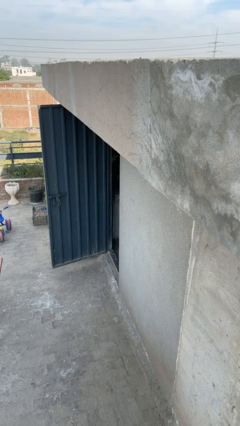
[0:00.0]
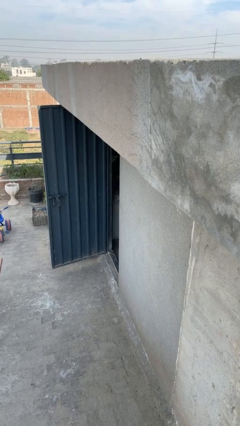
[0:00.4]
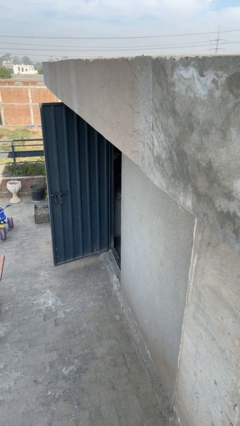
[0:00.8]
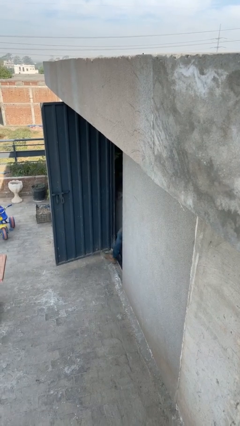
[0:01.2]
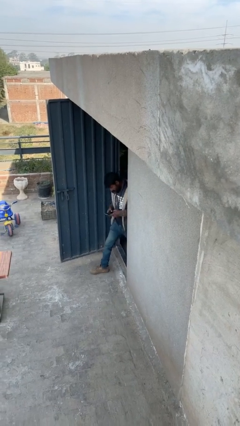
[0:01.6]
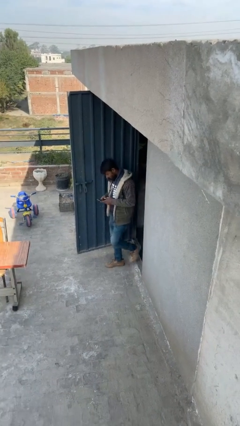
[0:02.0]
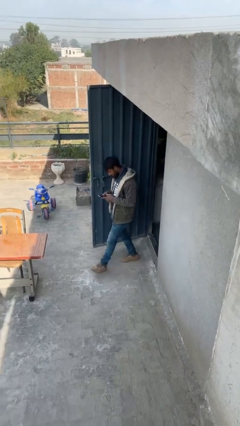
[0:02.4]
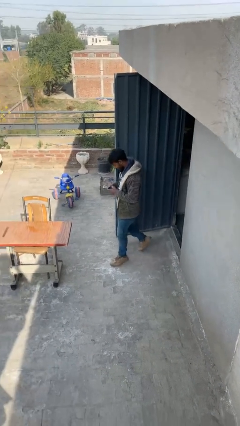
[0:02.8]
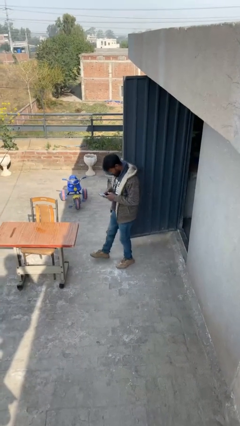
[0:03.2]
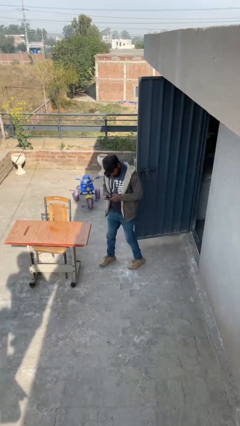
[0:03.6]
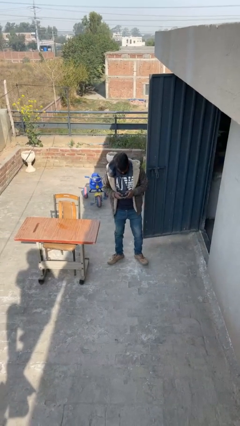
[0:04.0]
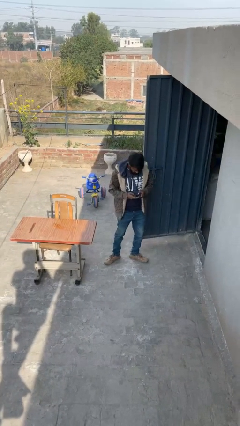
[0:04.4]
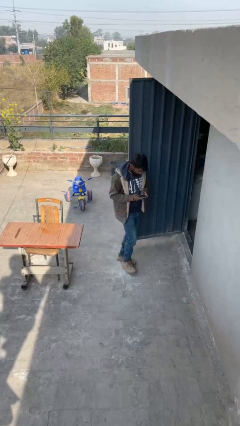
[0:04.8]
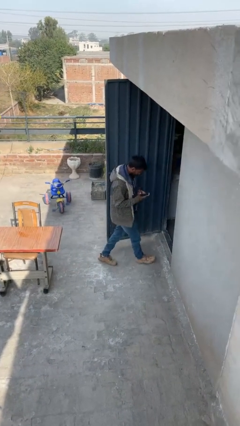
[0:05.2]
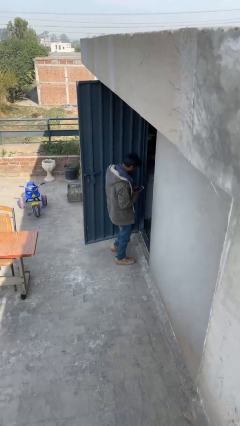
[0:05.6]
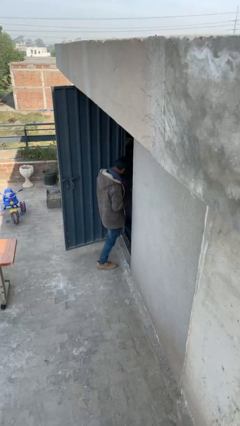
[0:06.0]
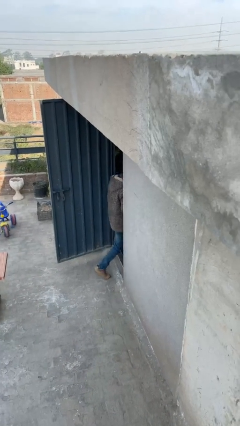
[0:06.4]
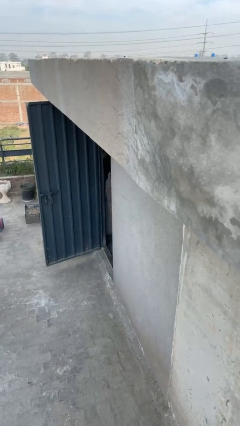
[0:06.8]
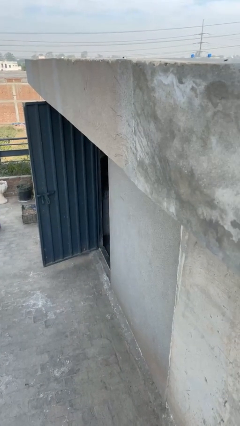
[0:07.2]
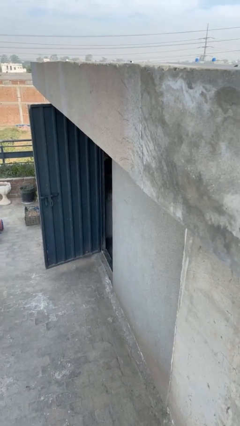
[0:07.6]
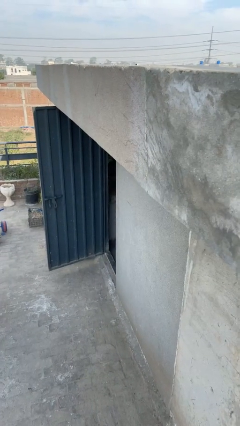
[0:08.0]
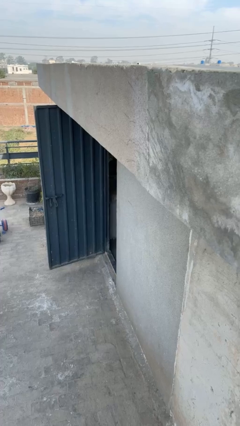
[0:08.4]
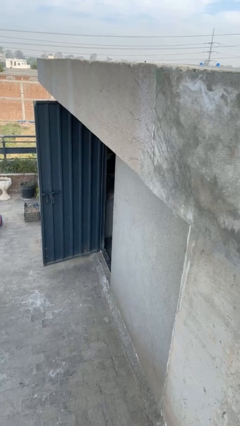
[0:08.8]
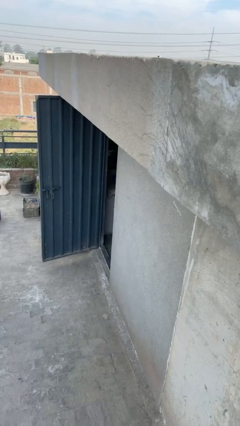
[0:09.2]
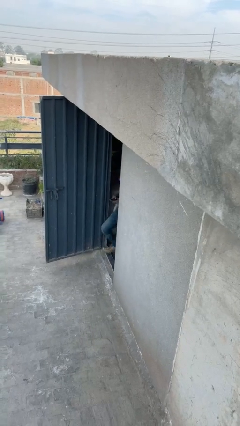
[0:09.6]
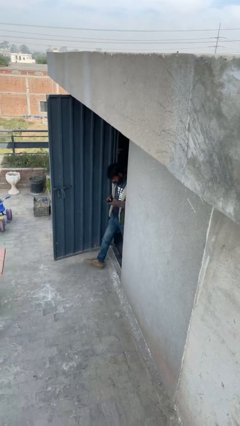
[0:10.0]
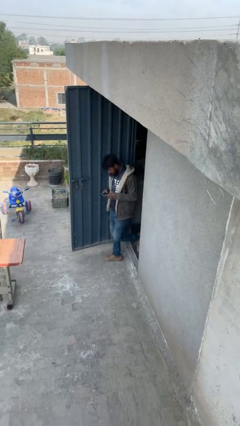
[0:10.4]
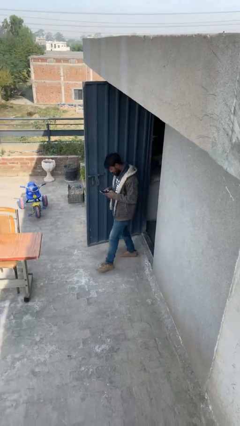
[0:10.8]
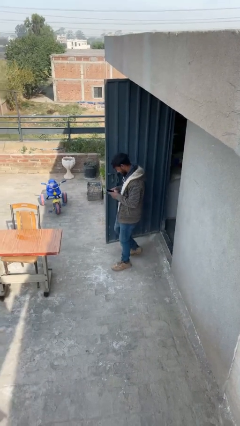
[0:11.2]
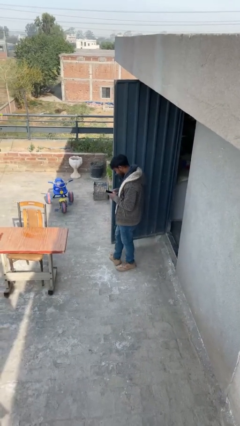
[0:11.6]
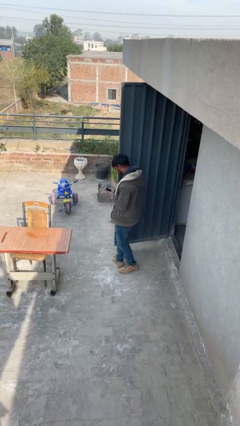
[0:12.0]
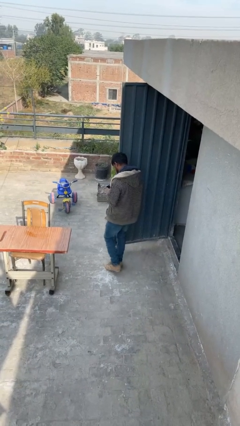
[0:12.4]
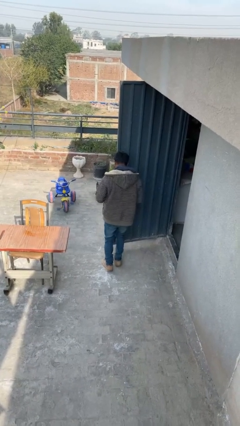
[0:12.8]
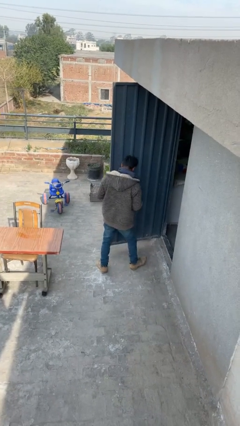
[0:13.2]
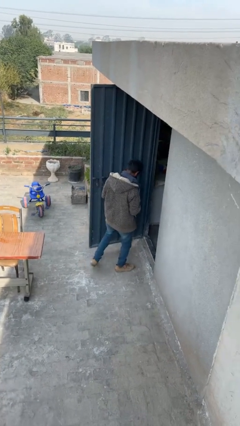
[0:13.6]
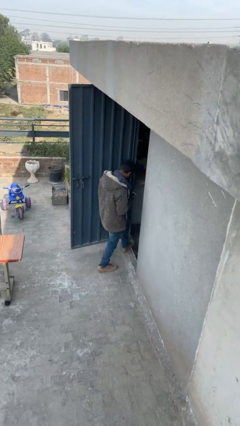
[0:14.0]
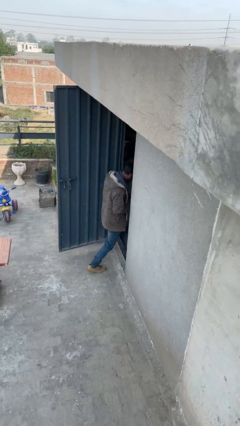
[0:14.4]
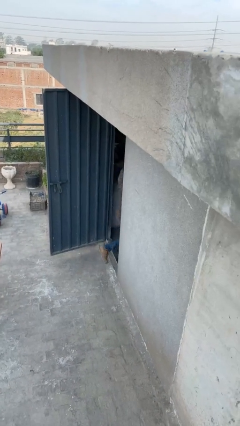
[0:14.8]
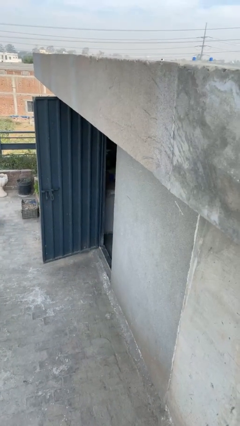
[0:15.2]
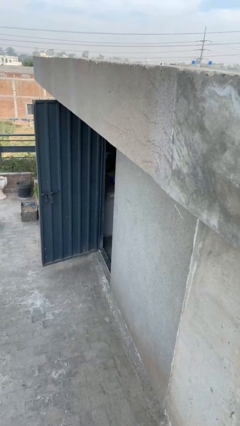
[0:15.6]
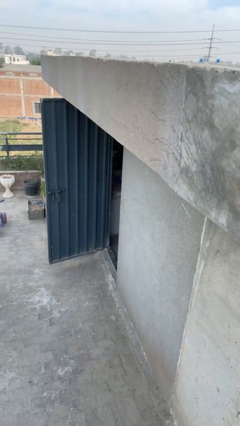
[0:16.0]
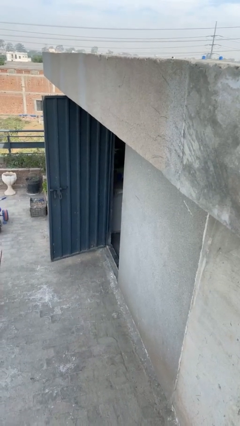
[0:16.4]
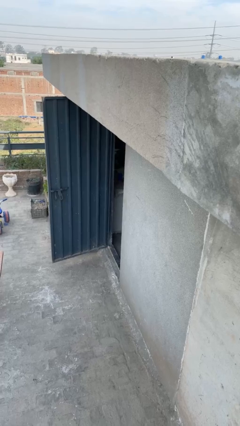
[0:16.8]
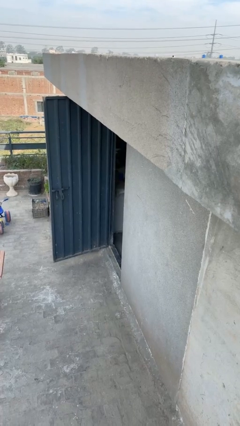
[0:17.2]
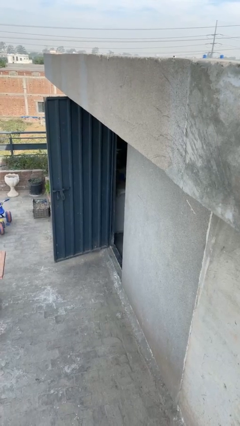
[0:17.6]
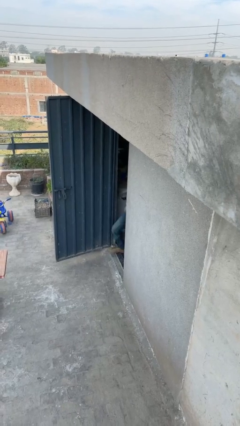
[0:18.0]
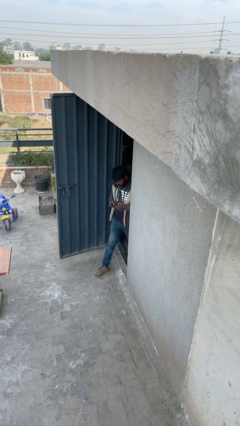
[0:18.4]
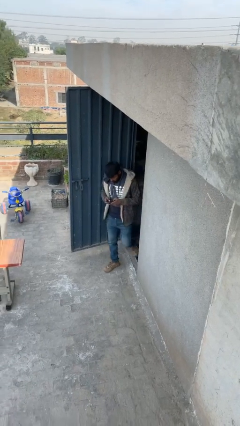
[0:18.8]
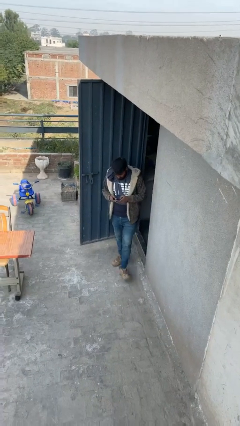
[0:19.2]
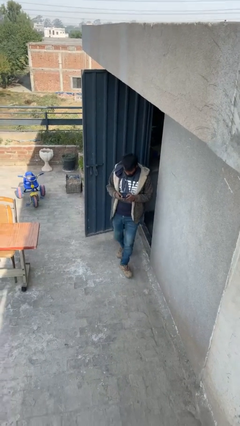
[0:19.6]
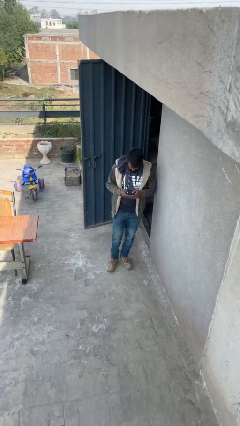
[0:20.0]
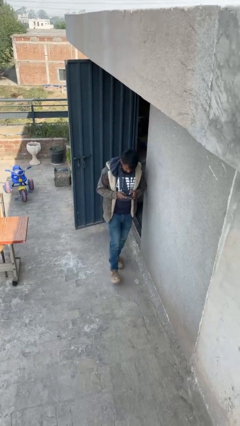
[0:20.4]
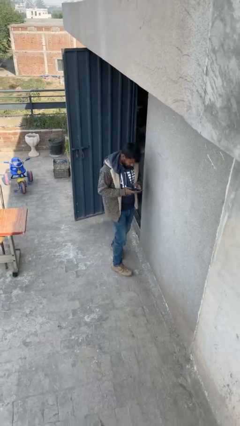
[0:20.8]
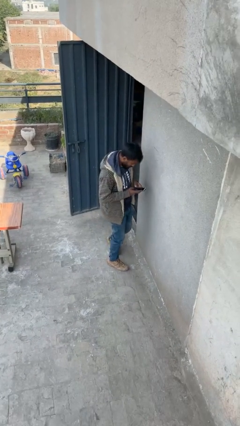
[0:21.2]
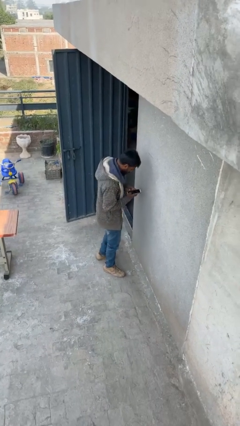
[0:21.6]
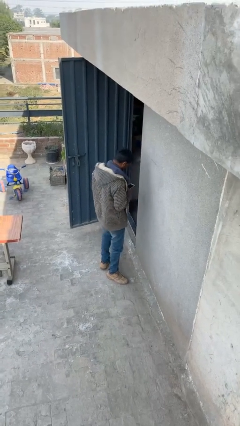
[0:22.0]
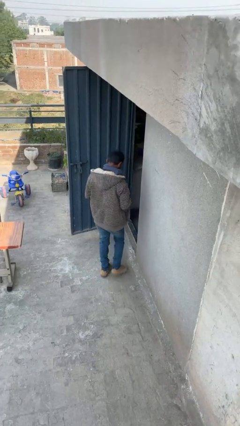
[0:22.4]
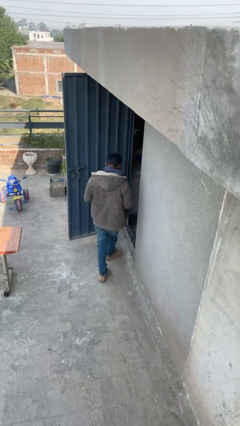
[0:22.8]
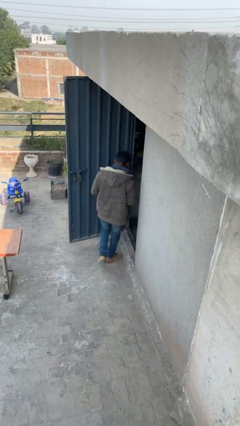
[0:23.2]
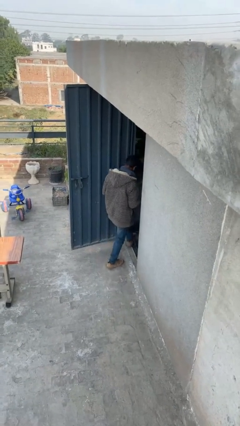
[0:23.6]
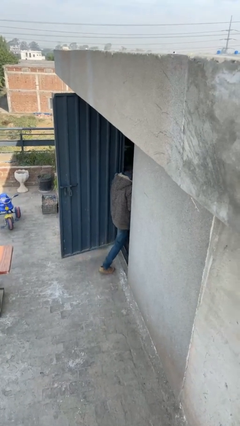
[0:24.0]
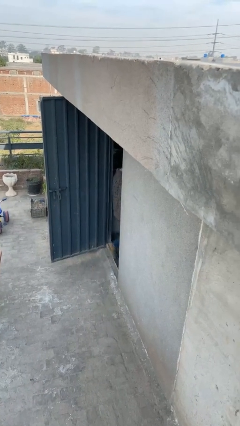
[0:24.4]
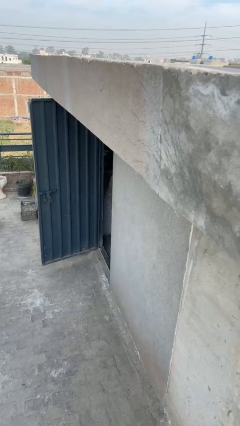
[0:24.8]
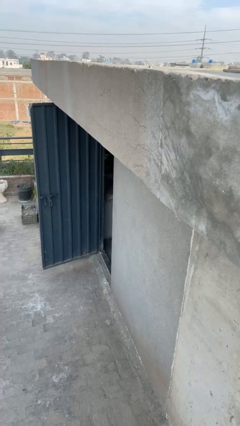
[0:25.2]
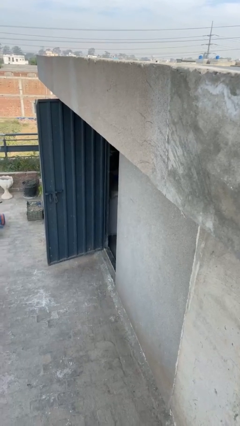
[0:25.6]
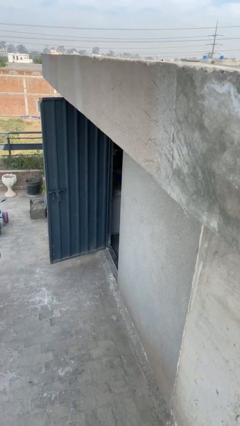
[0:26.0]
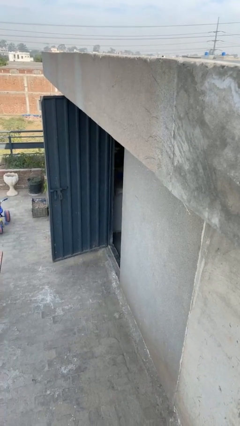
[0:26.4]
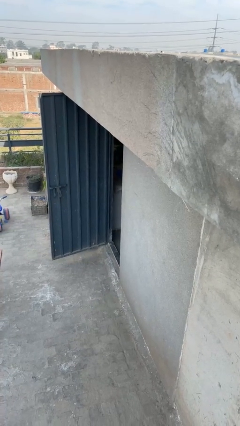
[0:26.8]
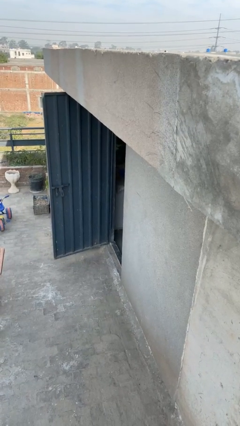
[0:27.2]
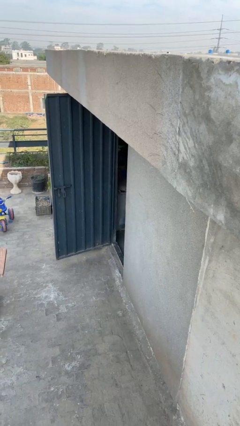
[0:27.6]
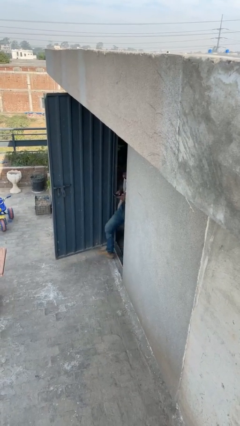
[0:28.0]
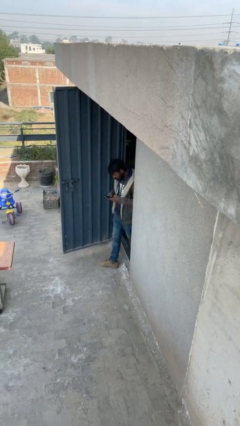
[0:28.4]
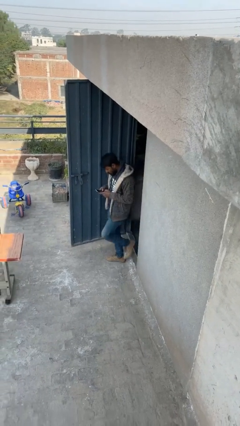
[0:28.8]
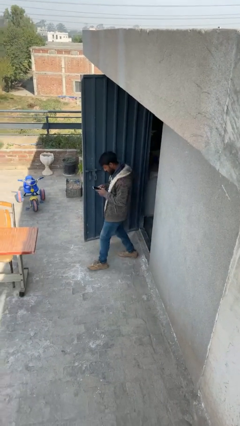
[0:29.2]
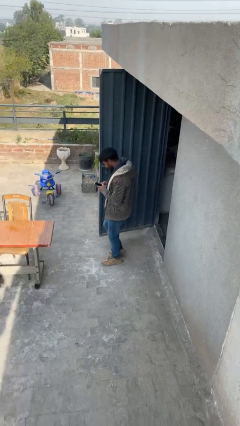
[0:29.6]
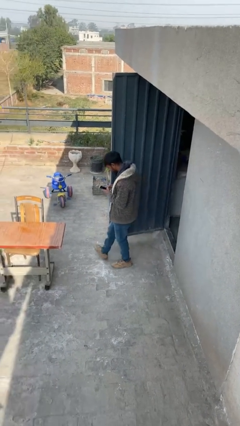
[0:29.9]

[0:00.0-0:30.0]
person texts on phone

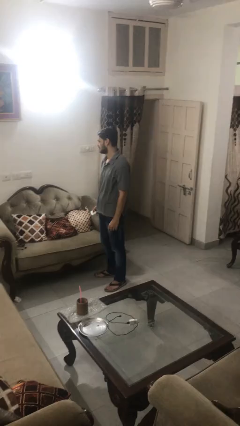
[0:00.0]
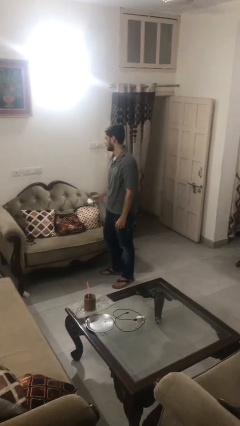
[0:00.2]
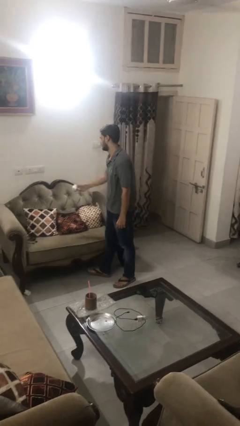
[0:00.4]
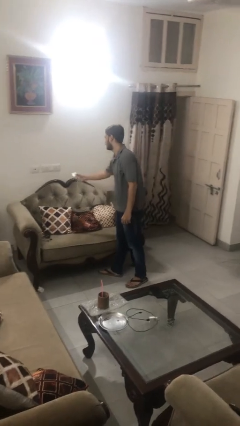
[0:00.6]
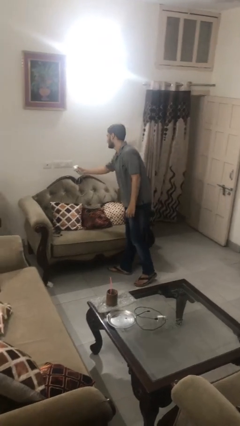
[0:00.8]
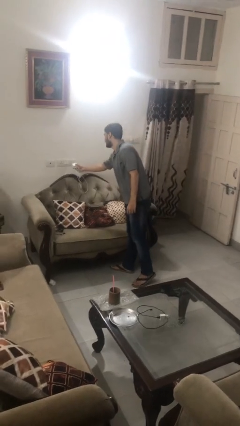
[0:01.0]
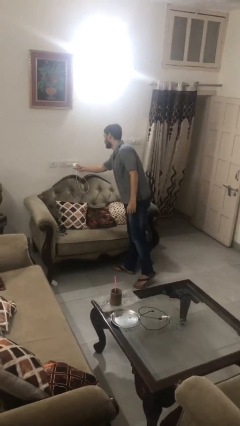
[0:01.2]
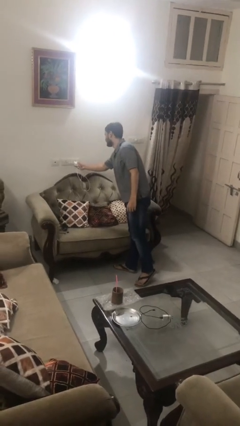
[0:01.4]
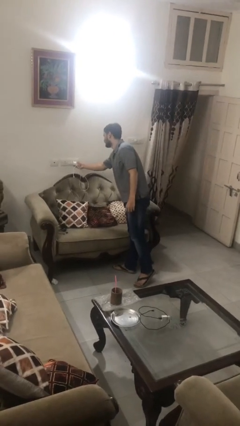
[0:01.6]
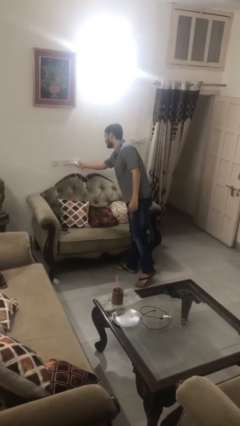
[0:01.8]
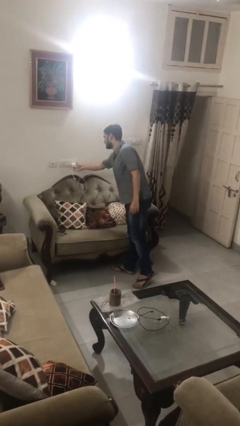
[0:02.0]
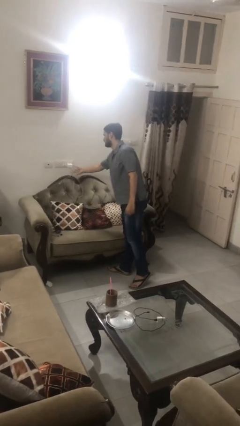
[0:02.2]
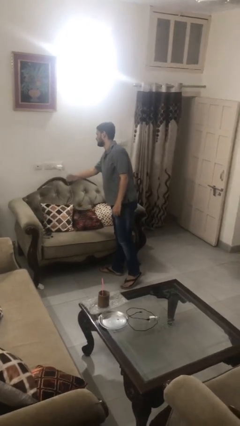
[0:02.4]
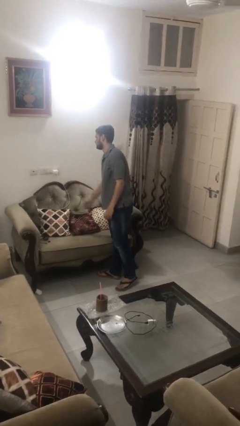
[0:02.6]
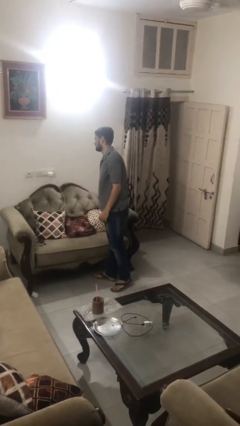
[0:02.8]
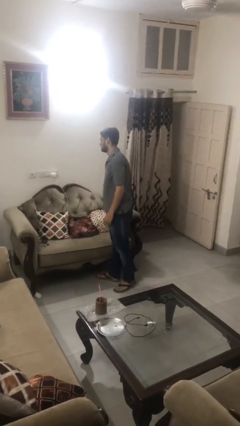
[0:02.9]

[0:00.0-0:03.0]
person plugs into electrical socket
